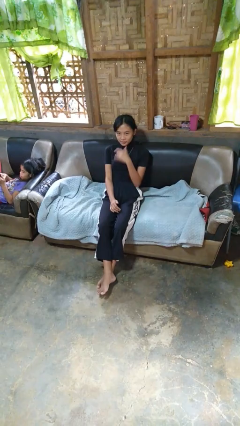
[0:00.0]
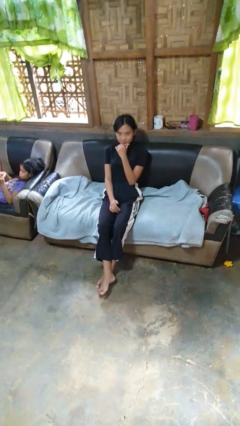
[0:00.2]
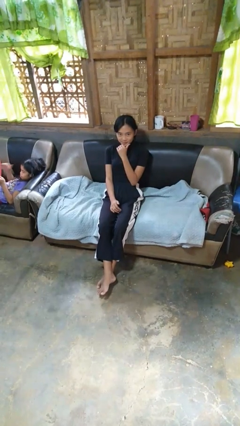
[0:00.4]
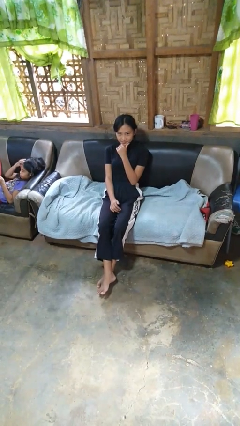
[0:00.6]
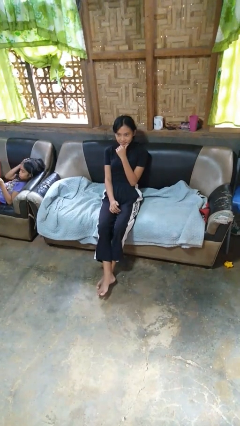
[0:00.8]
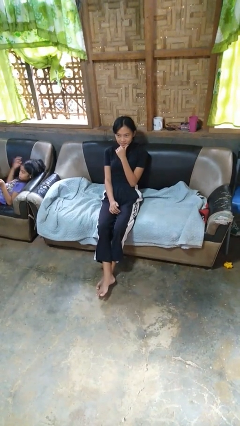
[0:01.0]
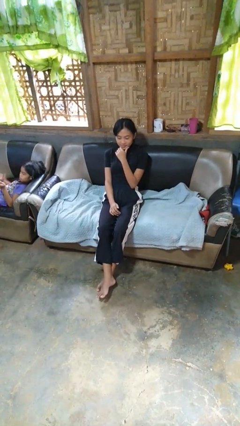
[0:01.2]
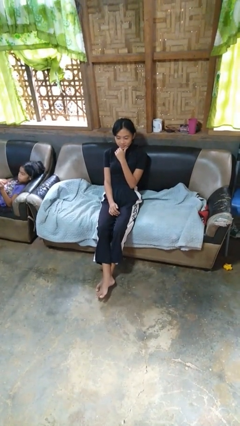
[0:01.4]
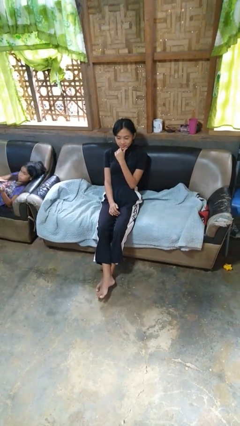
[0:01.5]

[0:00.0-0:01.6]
person strokes chin

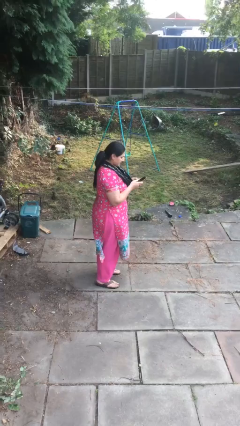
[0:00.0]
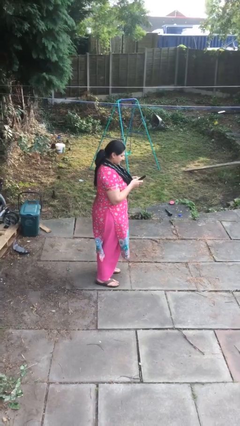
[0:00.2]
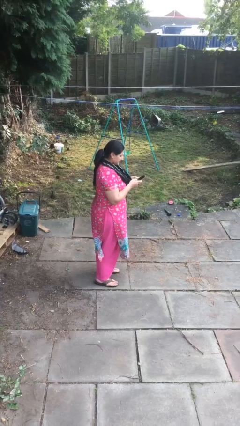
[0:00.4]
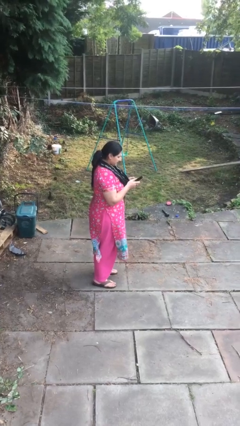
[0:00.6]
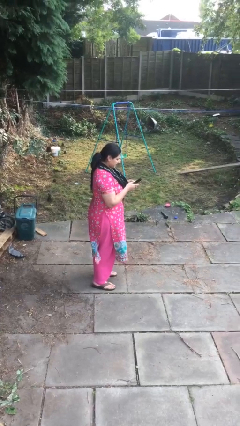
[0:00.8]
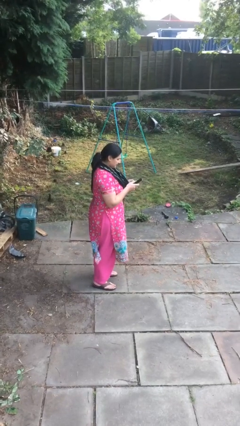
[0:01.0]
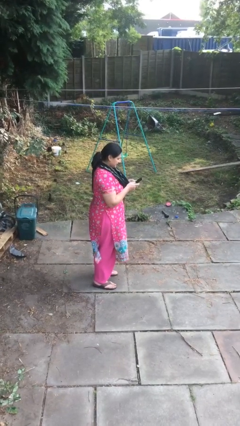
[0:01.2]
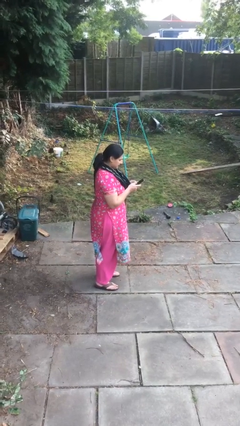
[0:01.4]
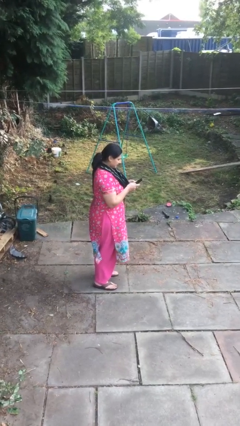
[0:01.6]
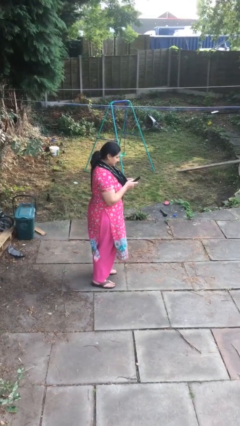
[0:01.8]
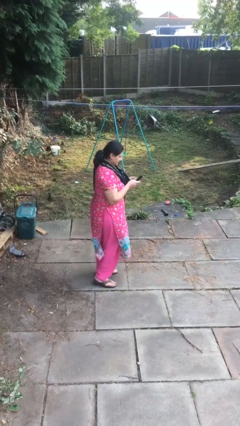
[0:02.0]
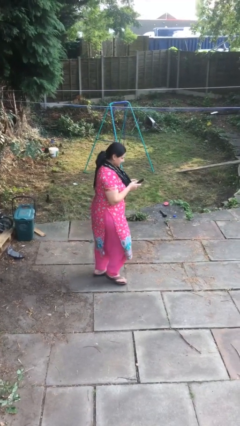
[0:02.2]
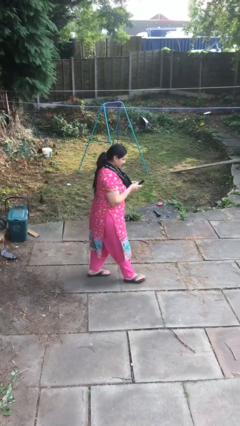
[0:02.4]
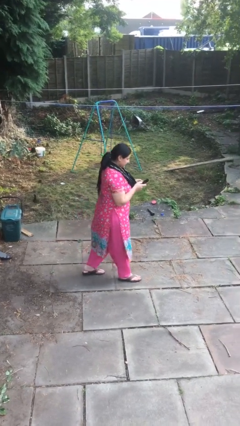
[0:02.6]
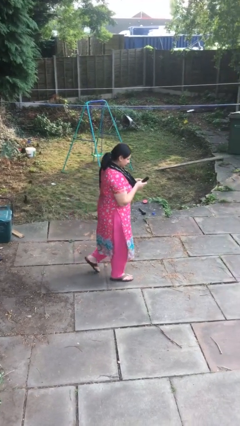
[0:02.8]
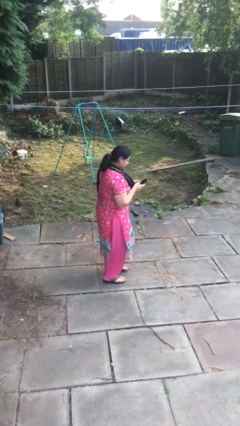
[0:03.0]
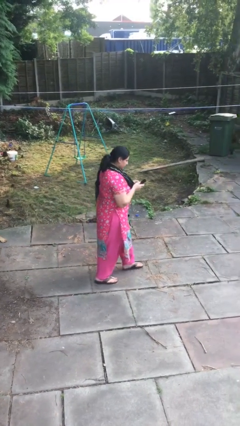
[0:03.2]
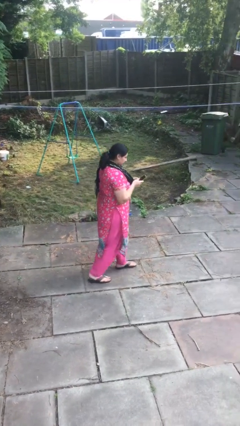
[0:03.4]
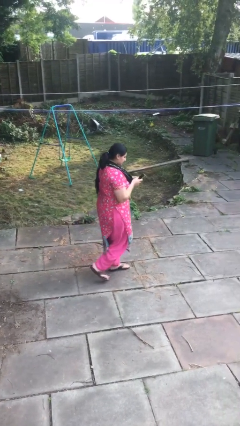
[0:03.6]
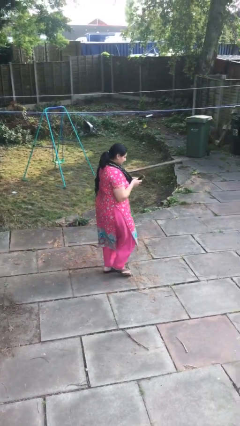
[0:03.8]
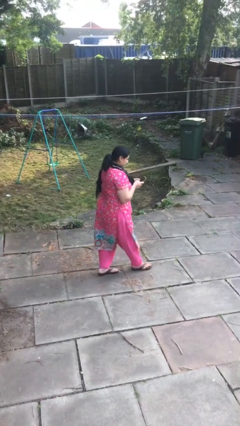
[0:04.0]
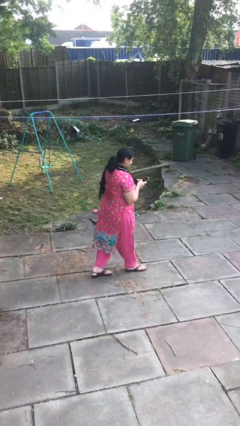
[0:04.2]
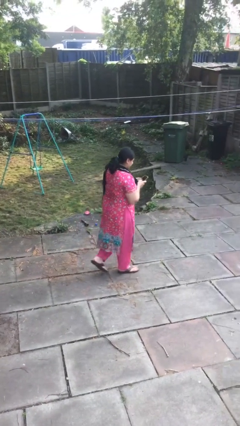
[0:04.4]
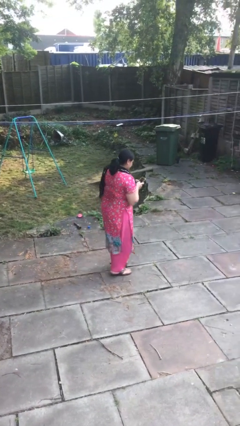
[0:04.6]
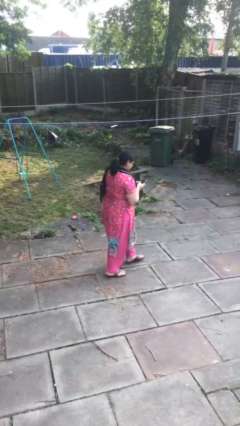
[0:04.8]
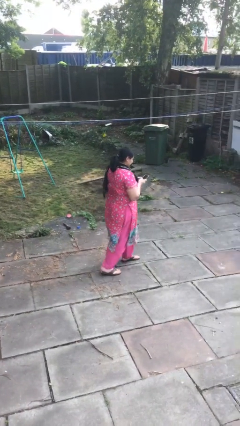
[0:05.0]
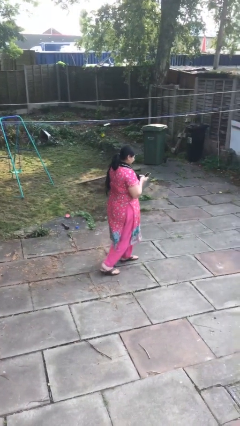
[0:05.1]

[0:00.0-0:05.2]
person texts on phone

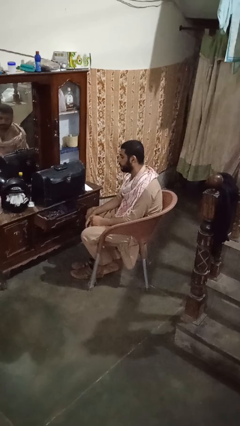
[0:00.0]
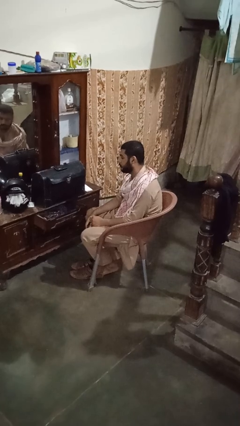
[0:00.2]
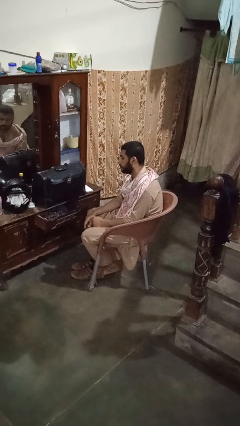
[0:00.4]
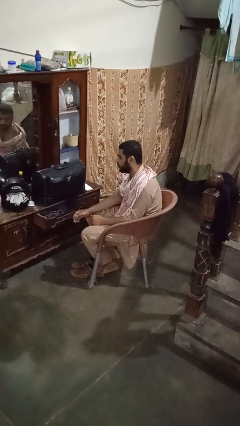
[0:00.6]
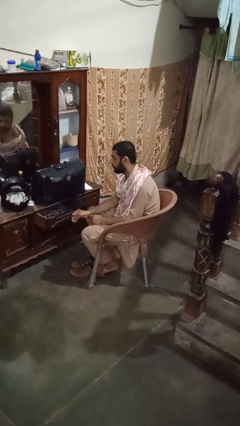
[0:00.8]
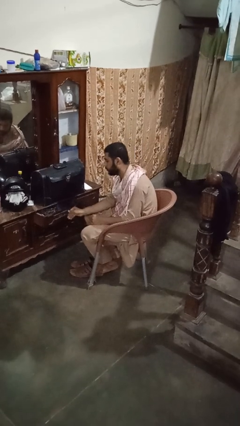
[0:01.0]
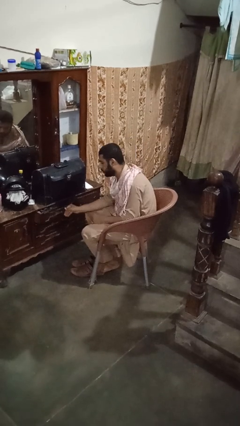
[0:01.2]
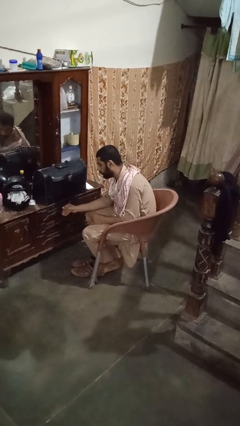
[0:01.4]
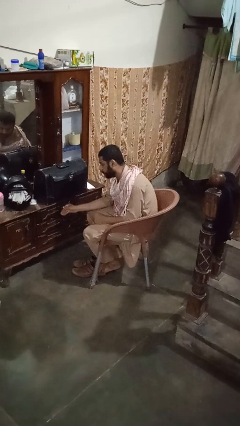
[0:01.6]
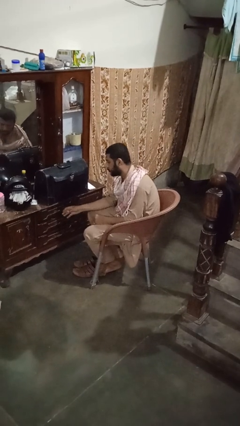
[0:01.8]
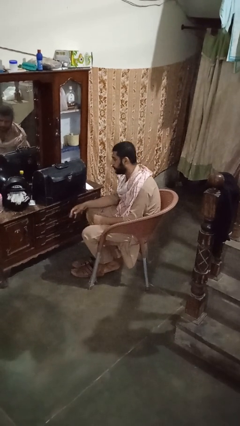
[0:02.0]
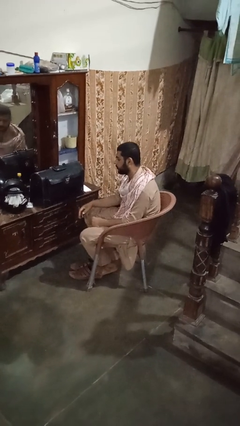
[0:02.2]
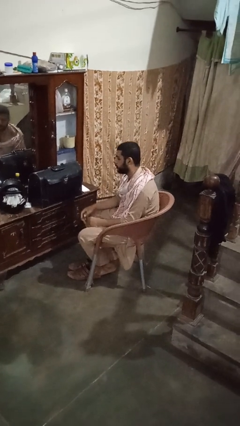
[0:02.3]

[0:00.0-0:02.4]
person closes dresser drawer

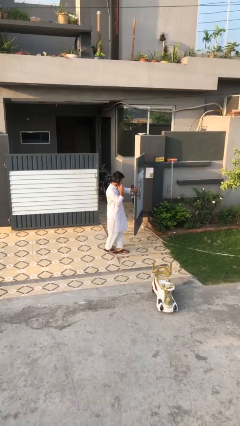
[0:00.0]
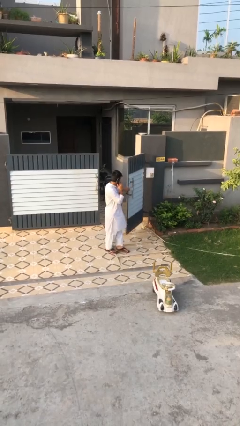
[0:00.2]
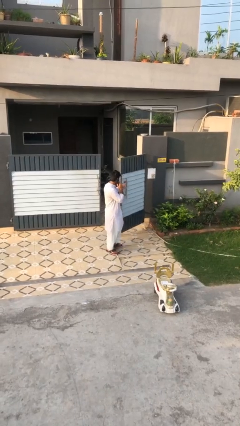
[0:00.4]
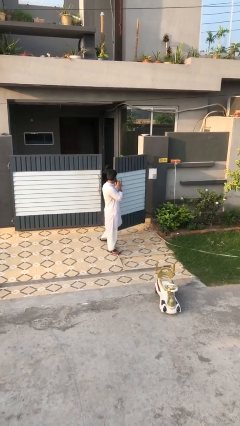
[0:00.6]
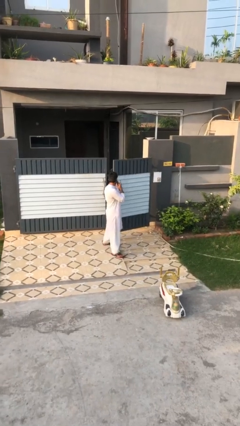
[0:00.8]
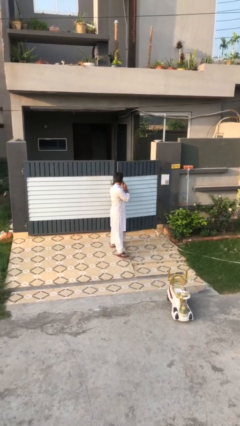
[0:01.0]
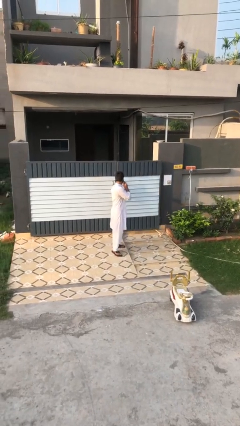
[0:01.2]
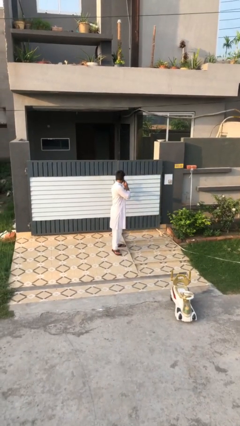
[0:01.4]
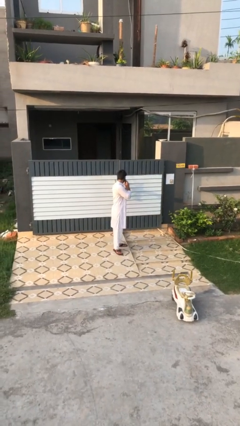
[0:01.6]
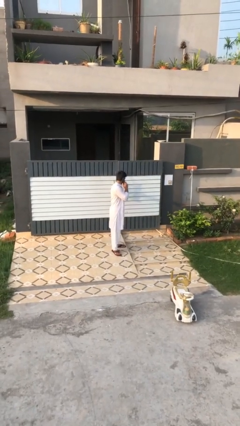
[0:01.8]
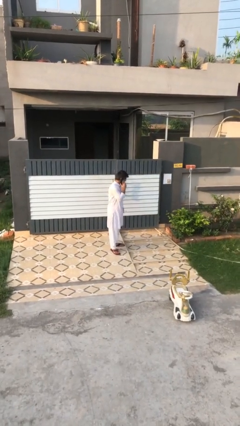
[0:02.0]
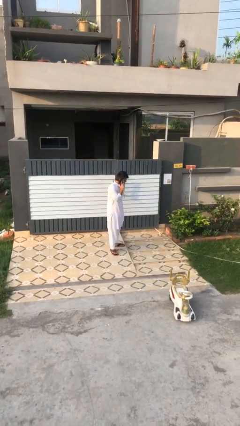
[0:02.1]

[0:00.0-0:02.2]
person closes facility door

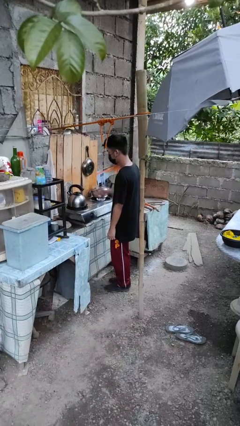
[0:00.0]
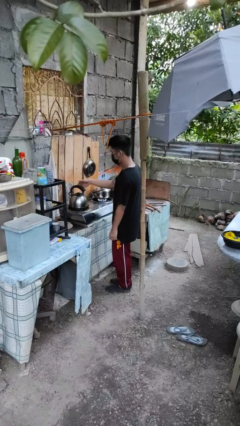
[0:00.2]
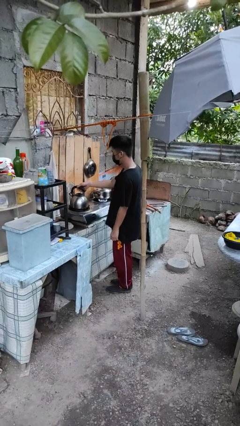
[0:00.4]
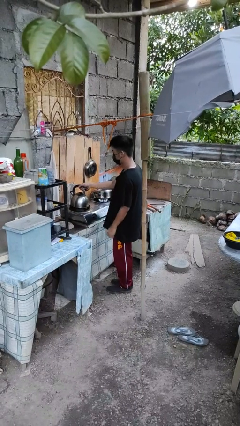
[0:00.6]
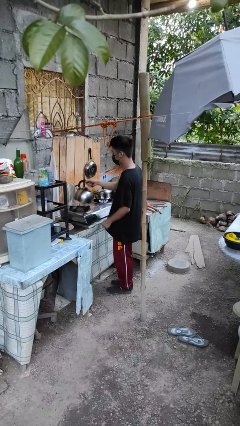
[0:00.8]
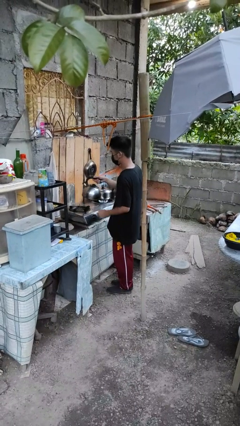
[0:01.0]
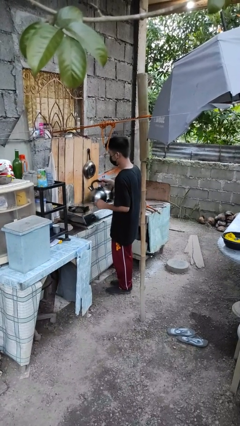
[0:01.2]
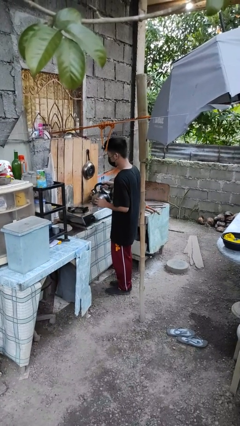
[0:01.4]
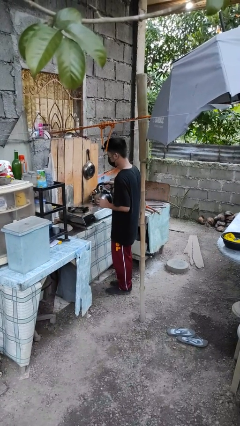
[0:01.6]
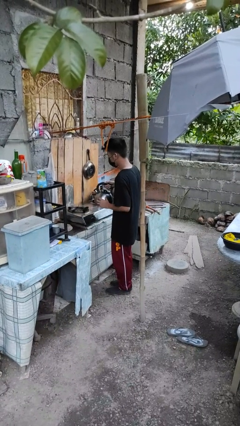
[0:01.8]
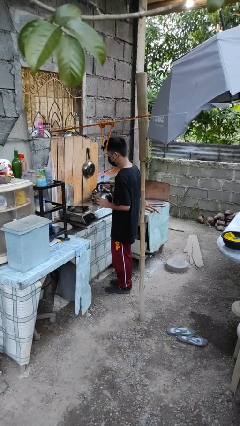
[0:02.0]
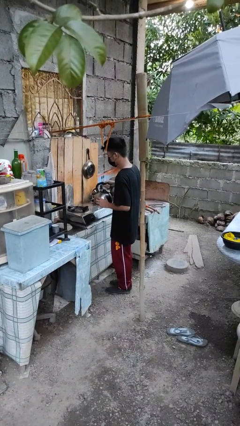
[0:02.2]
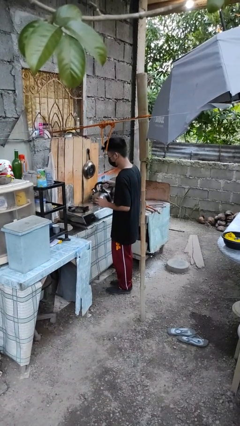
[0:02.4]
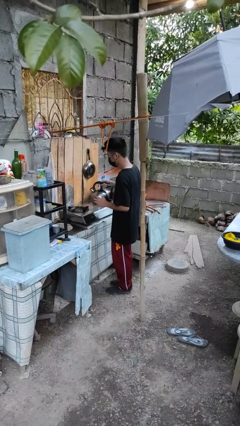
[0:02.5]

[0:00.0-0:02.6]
person picks up object from countertop

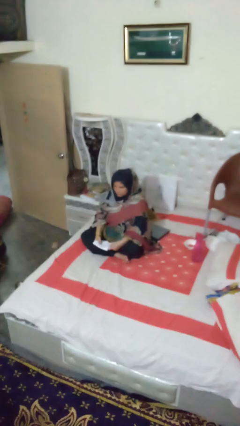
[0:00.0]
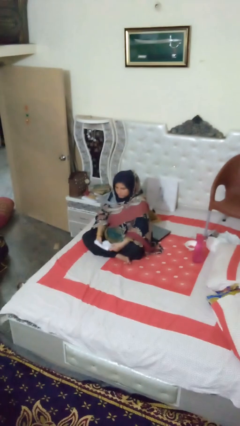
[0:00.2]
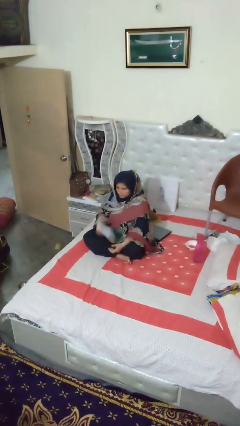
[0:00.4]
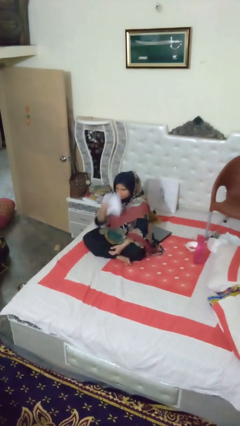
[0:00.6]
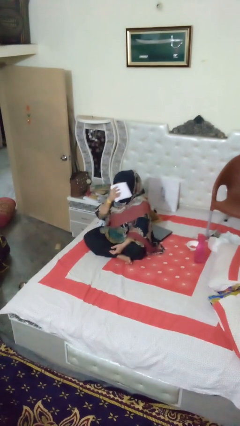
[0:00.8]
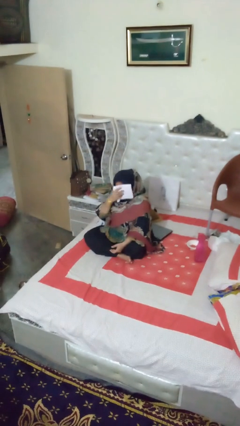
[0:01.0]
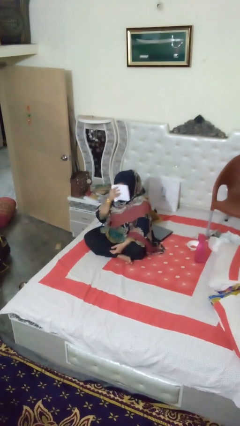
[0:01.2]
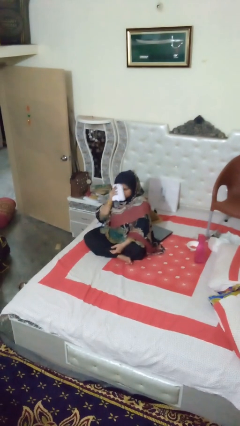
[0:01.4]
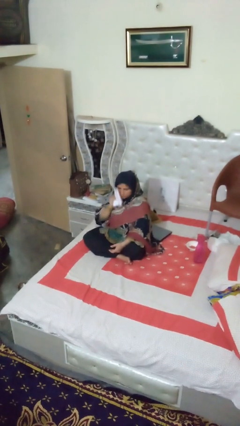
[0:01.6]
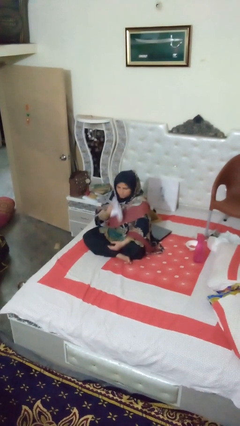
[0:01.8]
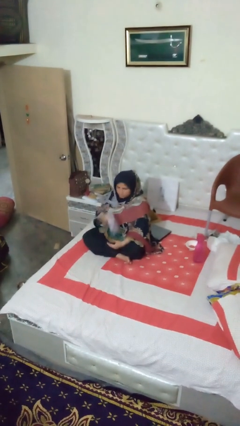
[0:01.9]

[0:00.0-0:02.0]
person wipes mouth with napkin

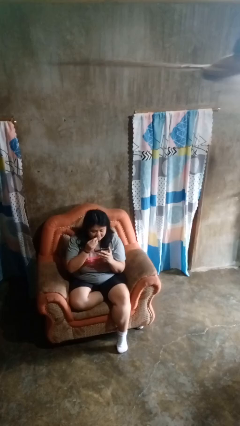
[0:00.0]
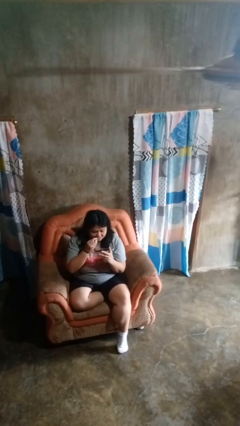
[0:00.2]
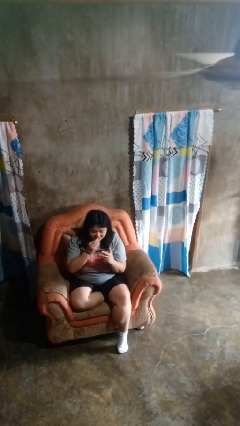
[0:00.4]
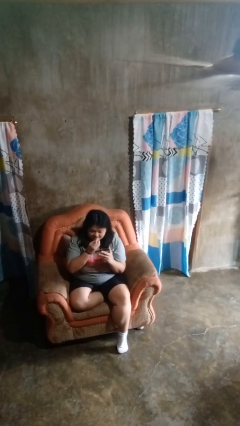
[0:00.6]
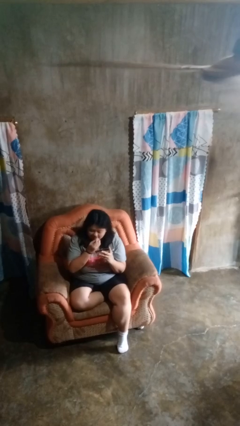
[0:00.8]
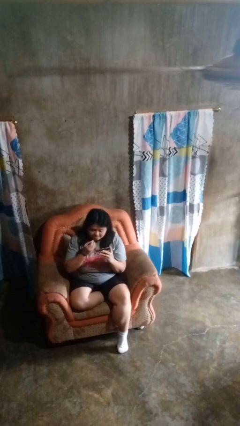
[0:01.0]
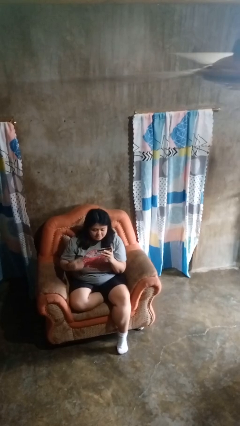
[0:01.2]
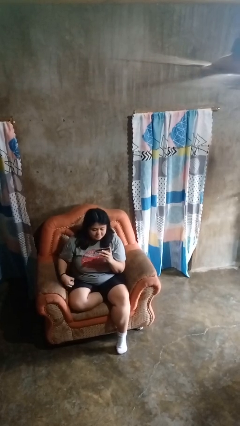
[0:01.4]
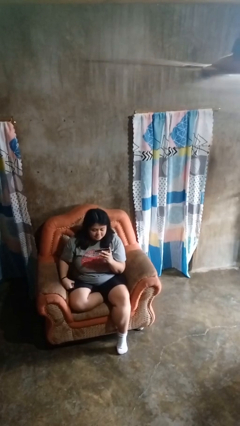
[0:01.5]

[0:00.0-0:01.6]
person applies lip makeup
